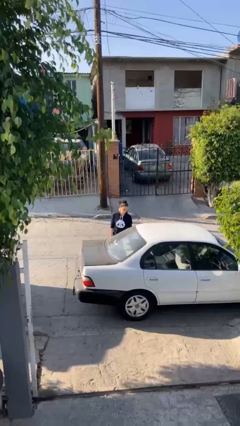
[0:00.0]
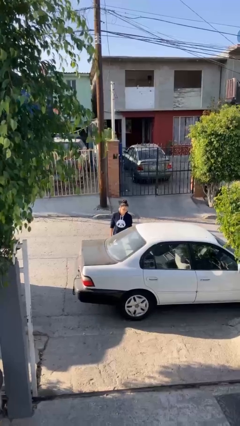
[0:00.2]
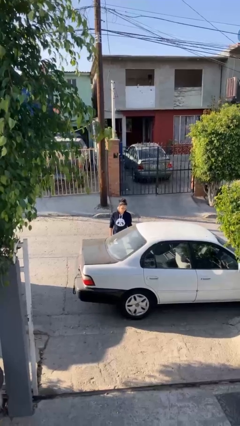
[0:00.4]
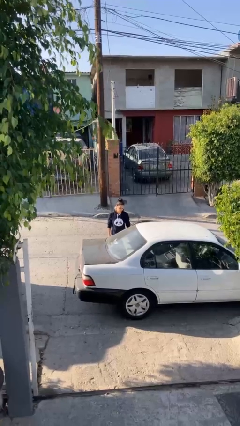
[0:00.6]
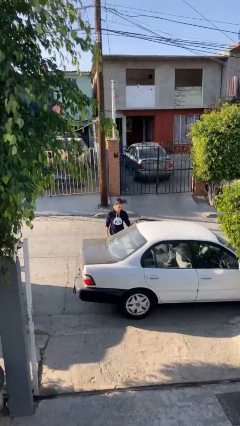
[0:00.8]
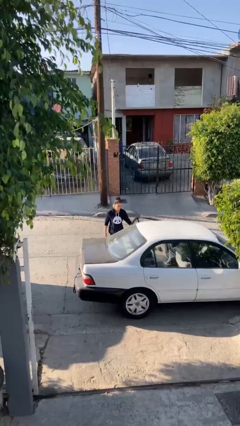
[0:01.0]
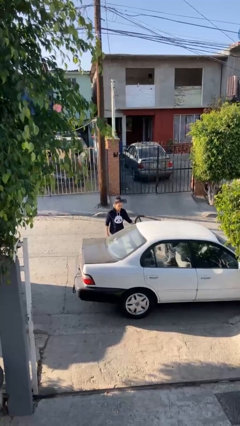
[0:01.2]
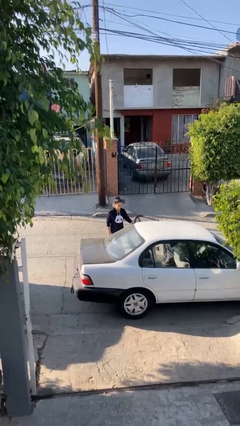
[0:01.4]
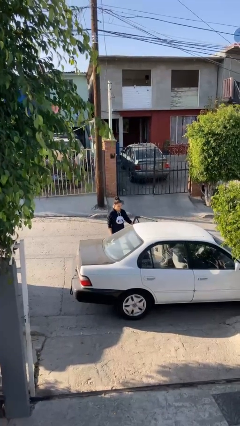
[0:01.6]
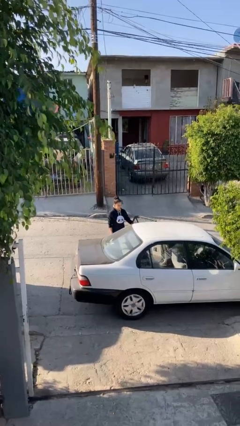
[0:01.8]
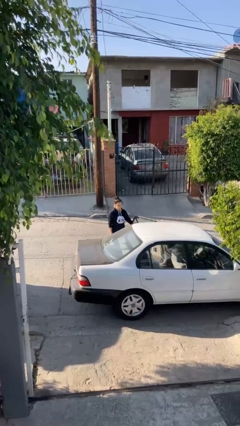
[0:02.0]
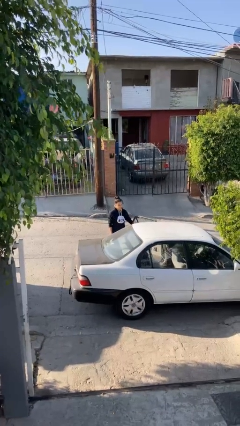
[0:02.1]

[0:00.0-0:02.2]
person opens car door

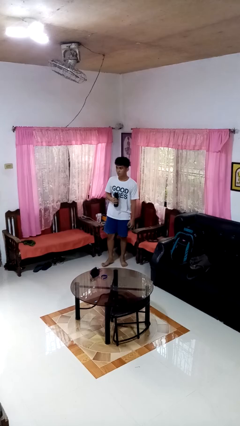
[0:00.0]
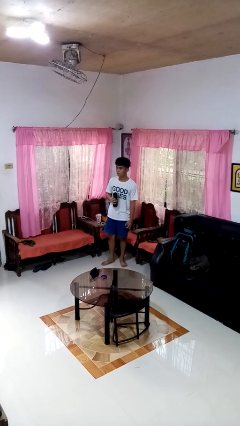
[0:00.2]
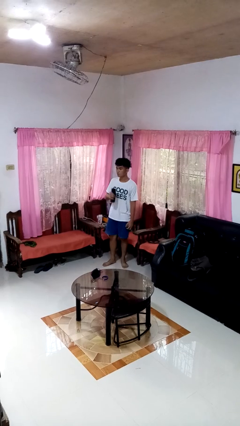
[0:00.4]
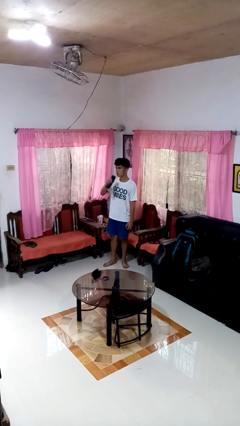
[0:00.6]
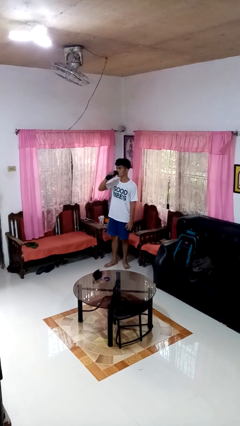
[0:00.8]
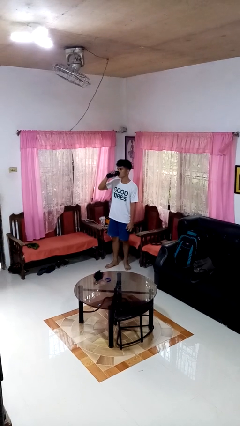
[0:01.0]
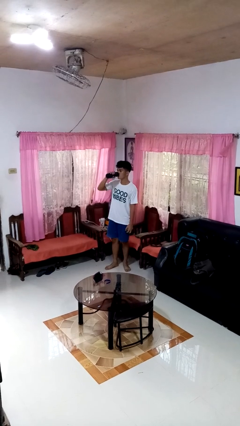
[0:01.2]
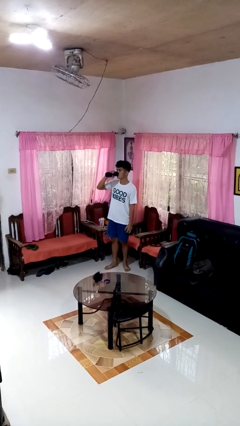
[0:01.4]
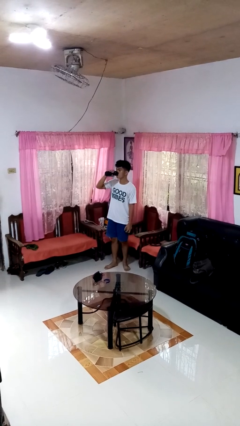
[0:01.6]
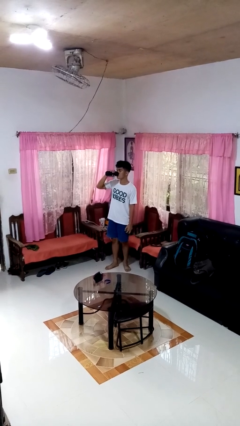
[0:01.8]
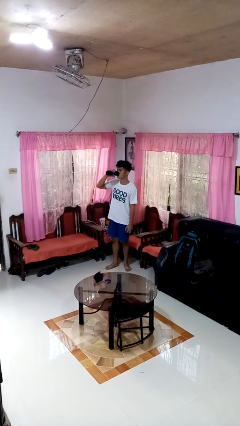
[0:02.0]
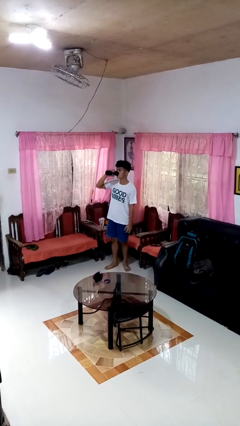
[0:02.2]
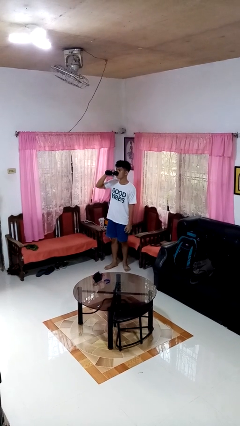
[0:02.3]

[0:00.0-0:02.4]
person drinks from bottle

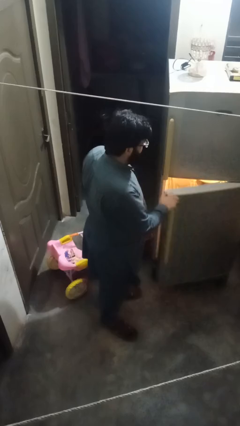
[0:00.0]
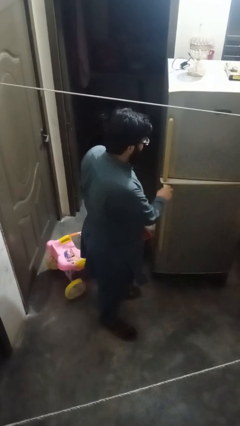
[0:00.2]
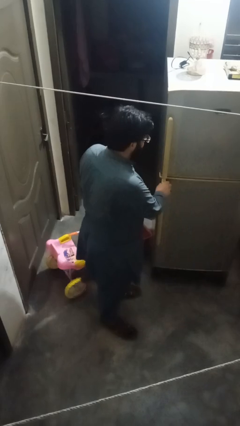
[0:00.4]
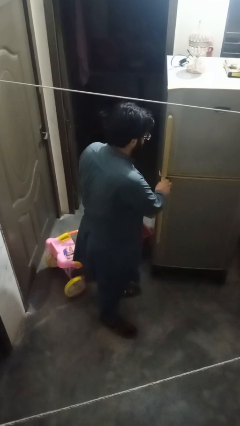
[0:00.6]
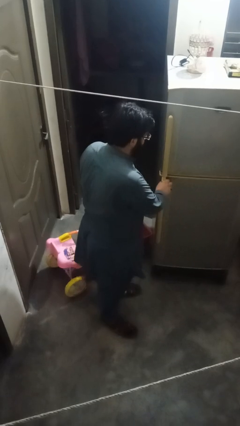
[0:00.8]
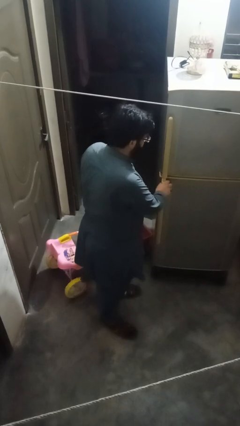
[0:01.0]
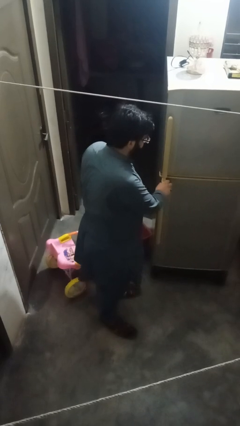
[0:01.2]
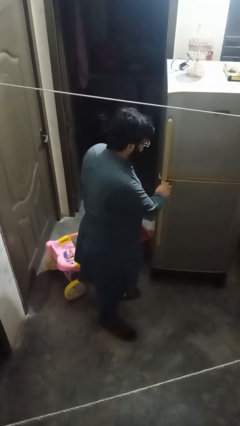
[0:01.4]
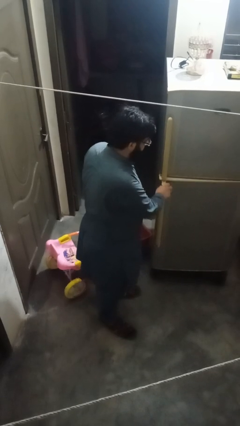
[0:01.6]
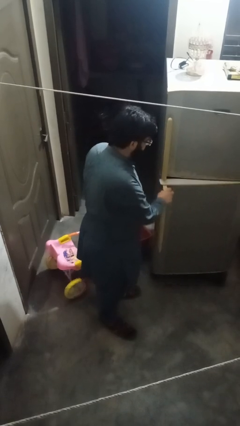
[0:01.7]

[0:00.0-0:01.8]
person closes refrigerator

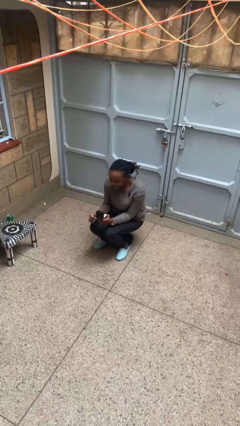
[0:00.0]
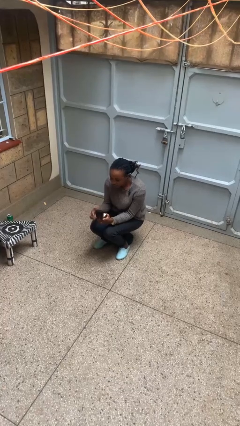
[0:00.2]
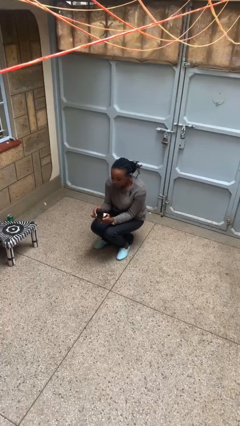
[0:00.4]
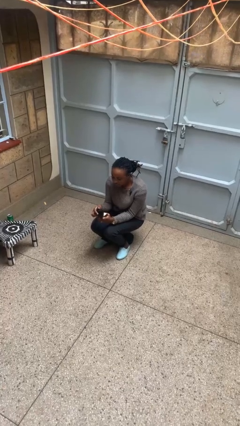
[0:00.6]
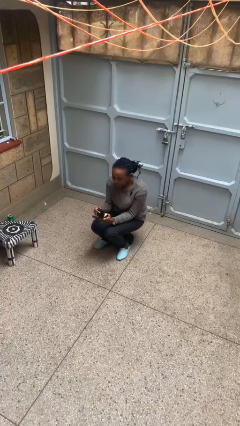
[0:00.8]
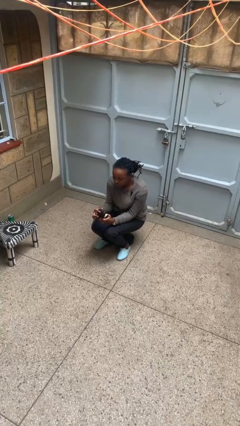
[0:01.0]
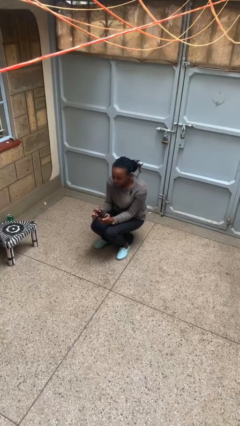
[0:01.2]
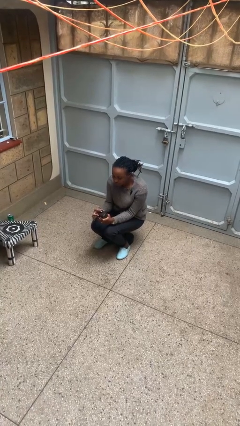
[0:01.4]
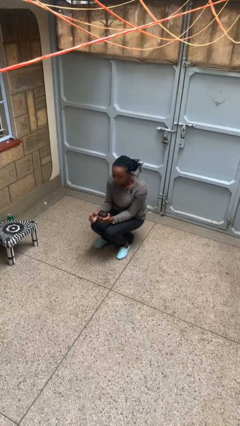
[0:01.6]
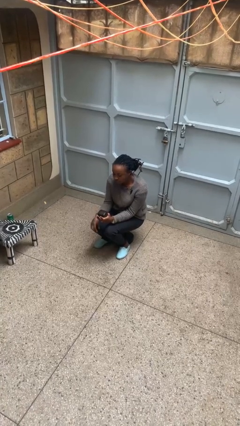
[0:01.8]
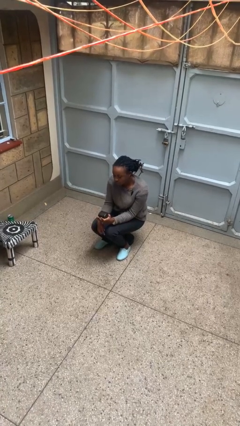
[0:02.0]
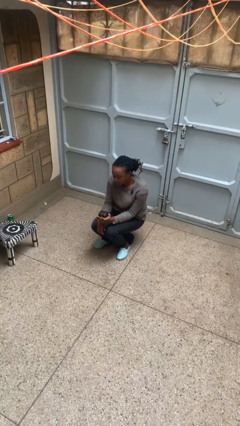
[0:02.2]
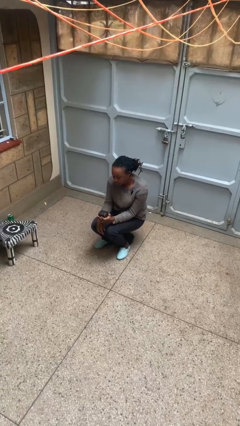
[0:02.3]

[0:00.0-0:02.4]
person closes jewelry box

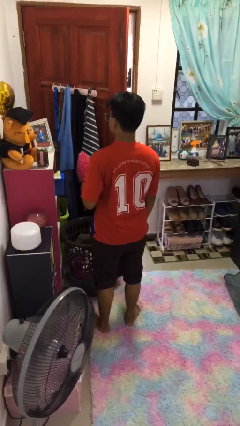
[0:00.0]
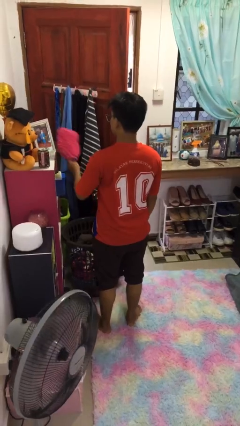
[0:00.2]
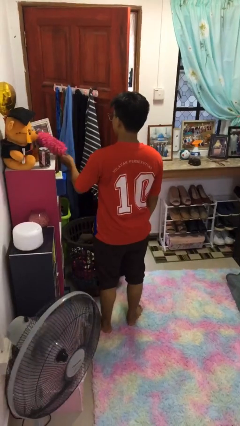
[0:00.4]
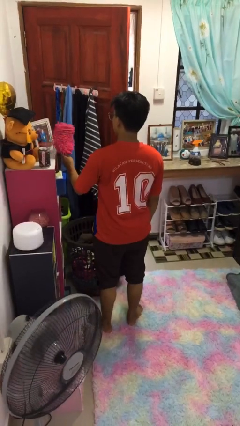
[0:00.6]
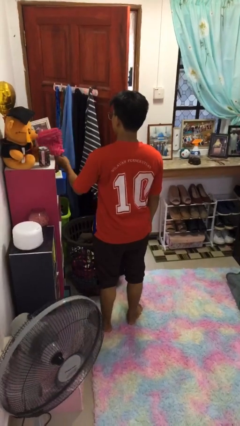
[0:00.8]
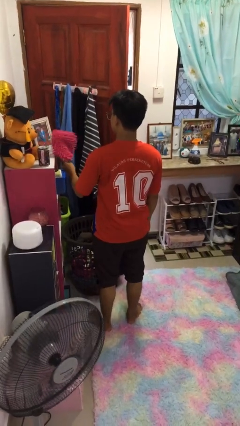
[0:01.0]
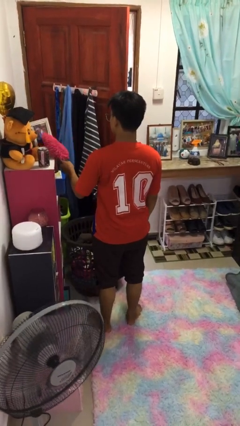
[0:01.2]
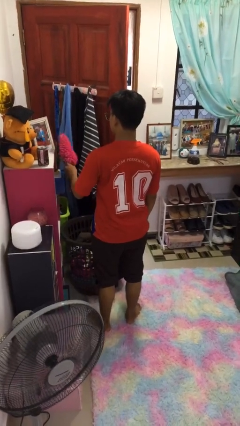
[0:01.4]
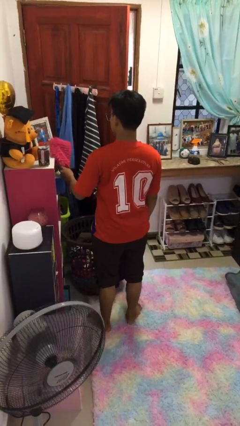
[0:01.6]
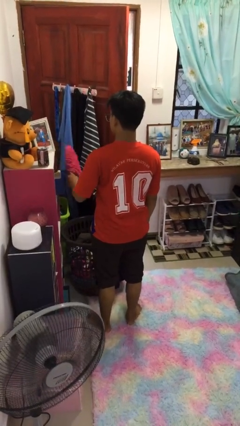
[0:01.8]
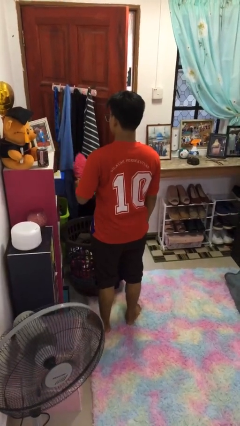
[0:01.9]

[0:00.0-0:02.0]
person dusts furniture

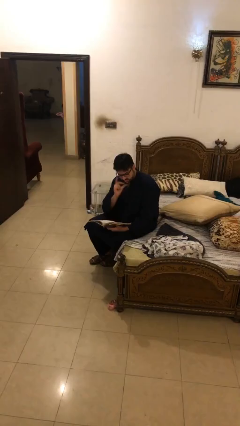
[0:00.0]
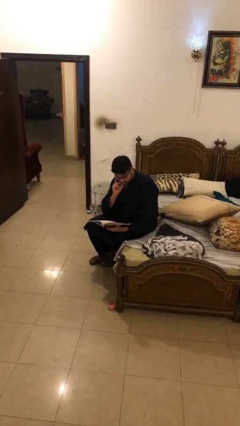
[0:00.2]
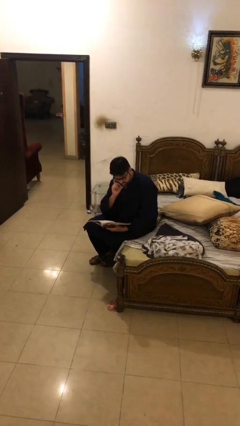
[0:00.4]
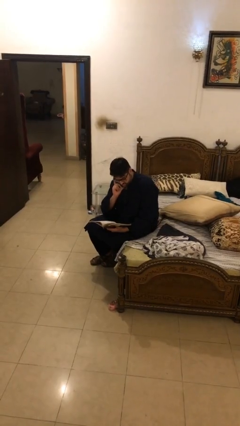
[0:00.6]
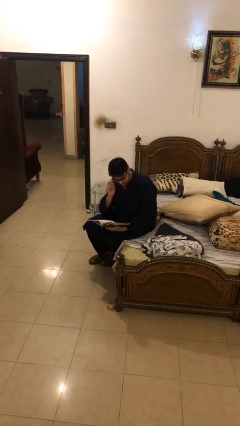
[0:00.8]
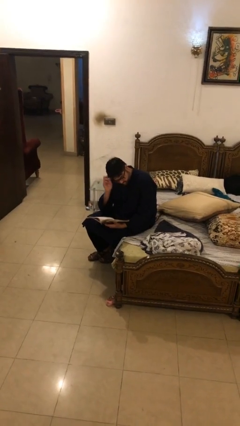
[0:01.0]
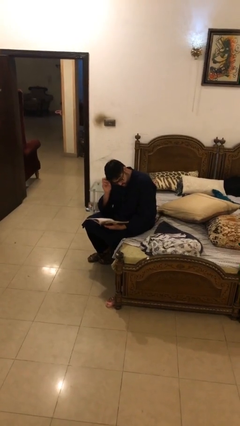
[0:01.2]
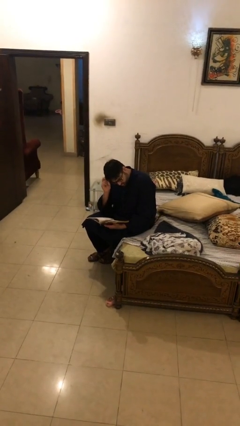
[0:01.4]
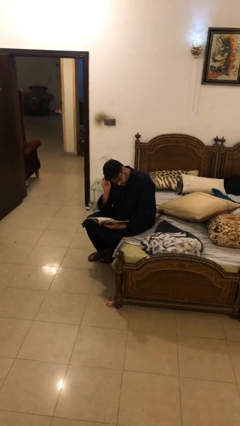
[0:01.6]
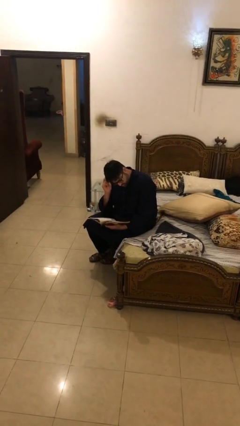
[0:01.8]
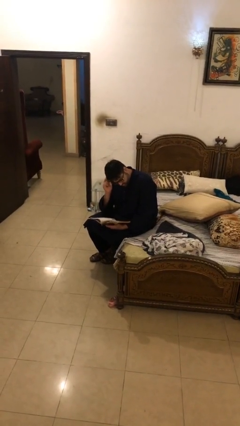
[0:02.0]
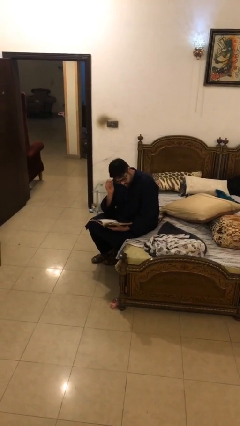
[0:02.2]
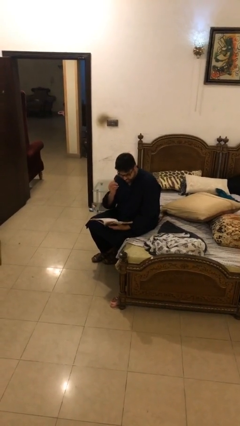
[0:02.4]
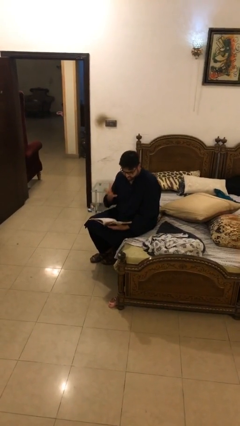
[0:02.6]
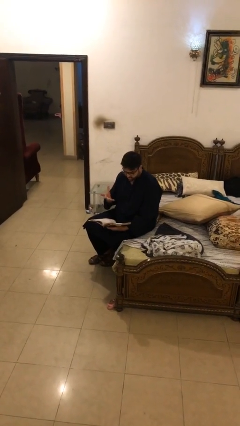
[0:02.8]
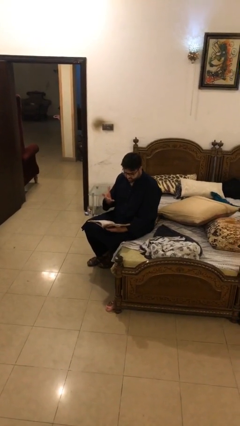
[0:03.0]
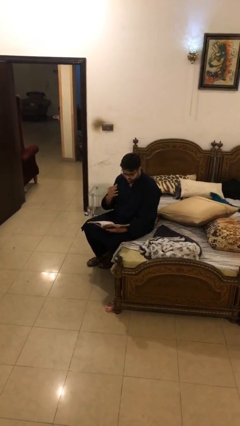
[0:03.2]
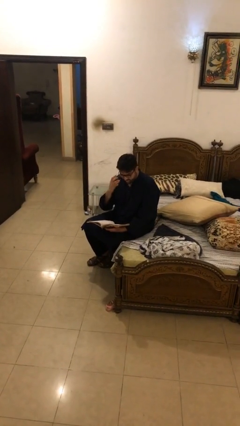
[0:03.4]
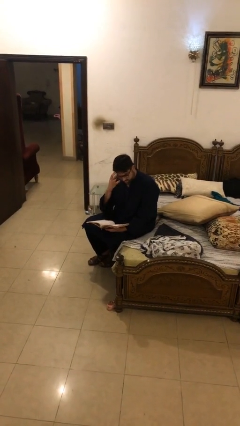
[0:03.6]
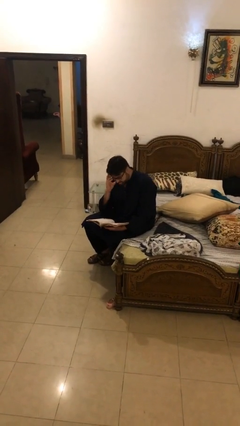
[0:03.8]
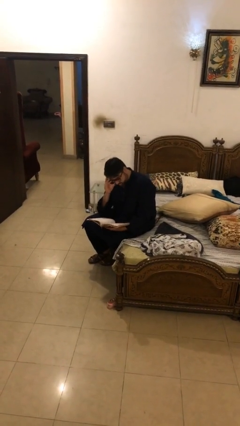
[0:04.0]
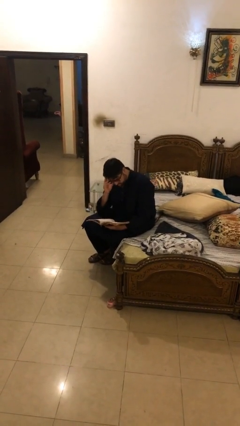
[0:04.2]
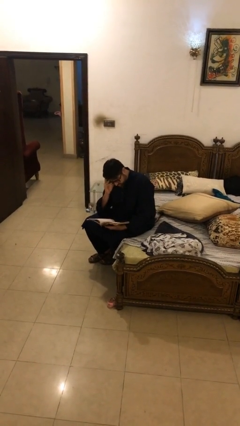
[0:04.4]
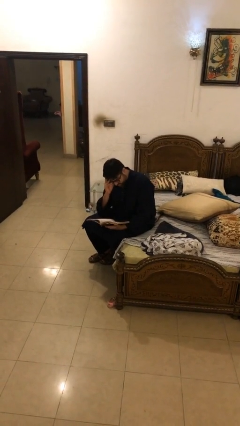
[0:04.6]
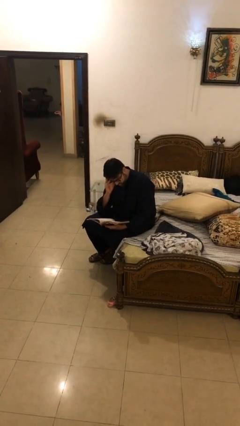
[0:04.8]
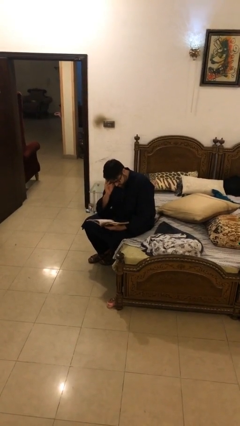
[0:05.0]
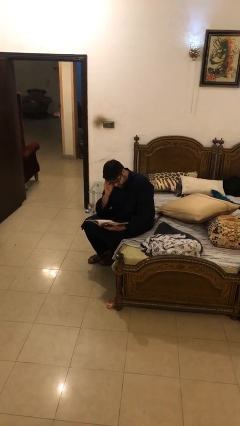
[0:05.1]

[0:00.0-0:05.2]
person reads document

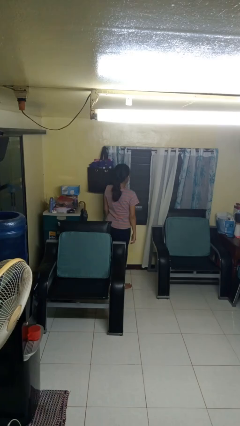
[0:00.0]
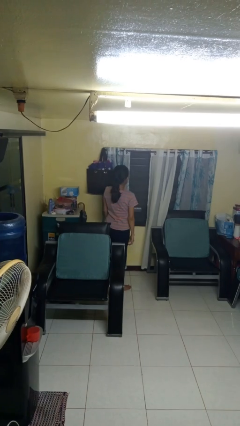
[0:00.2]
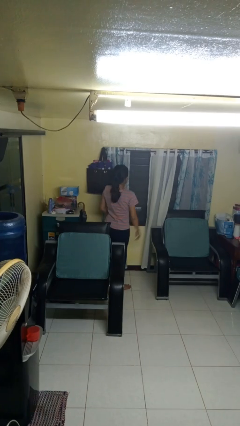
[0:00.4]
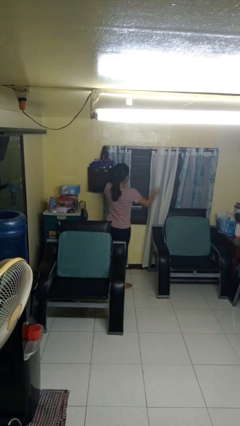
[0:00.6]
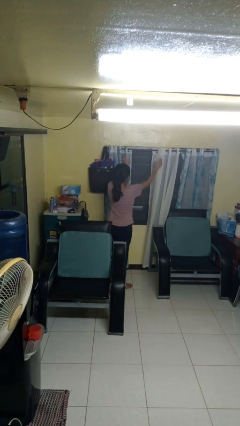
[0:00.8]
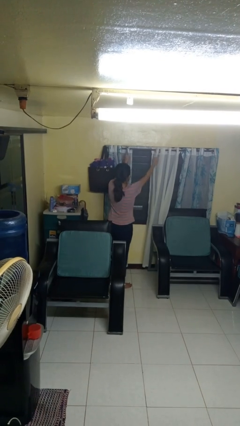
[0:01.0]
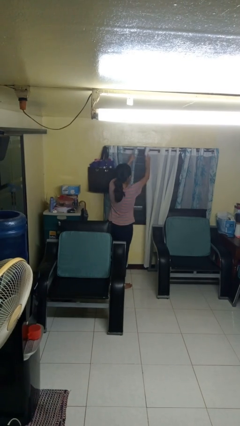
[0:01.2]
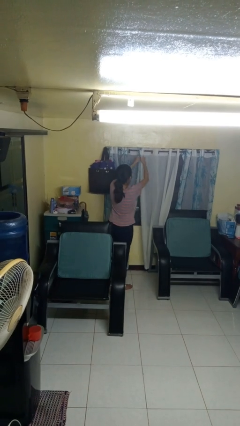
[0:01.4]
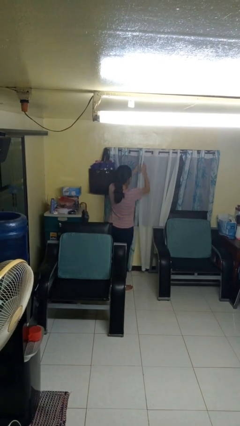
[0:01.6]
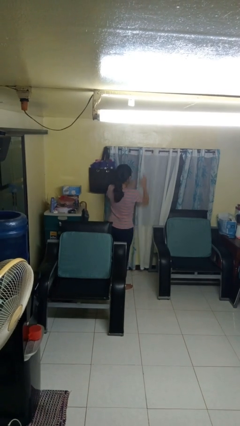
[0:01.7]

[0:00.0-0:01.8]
person closes curtains
